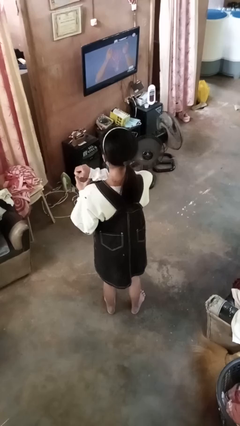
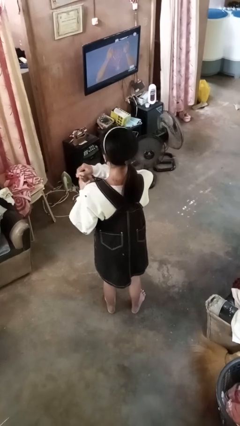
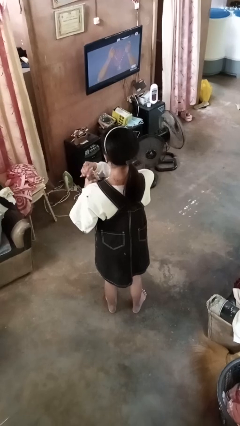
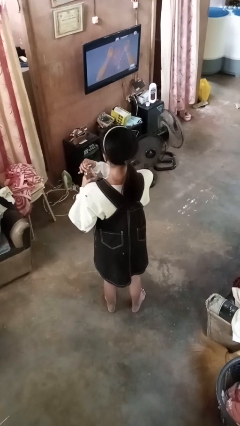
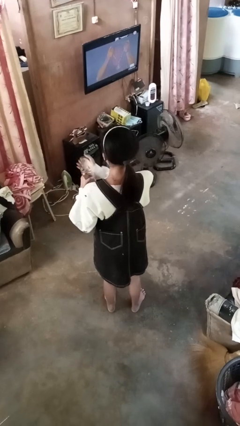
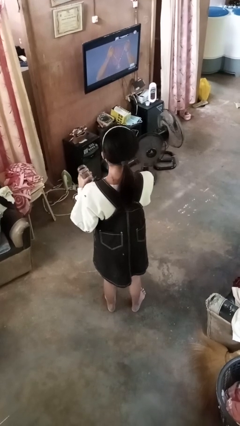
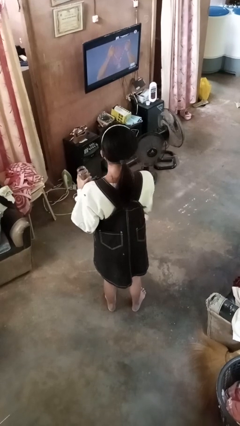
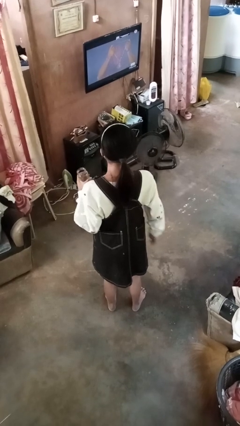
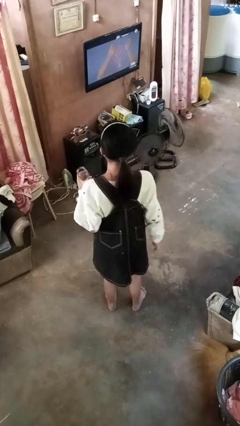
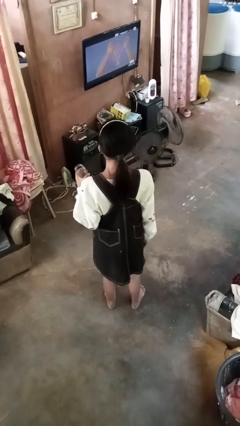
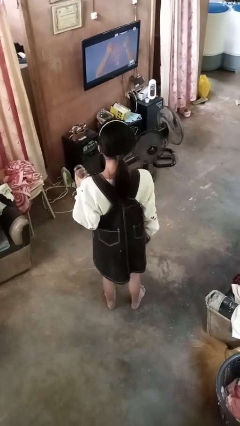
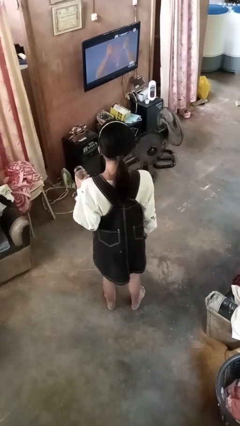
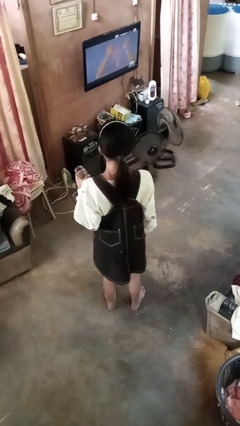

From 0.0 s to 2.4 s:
person opens jar

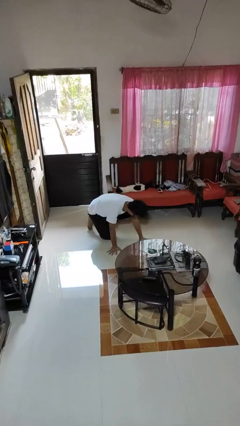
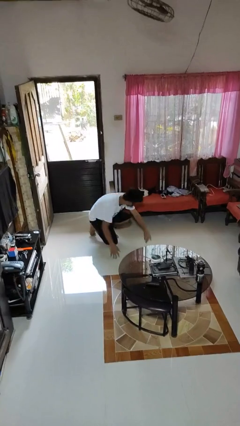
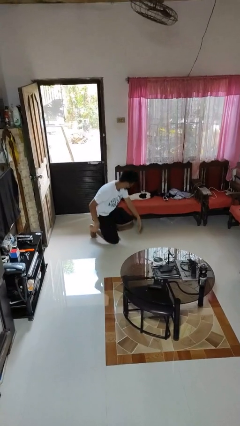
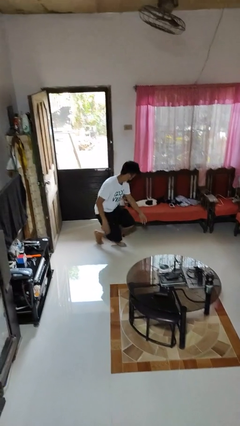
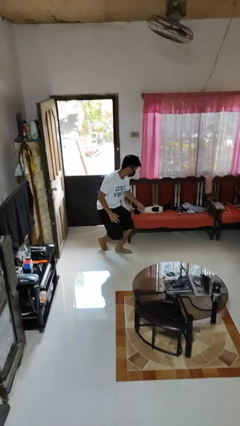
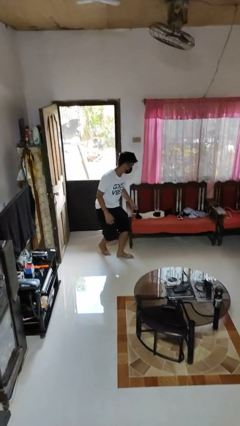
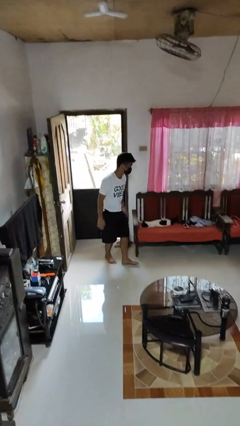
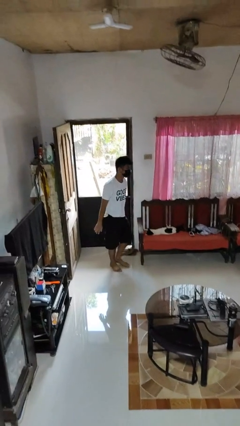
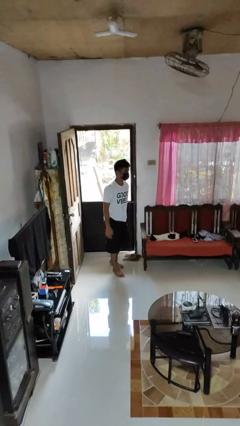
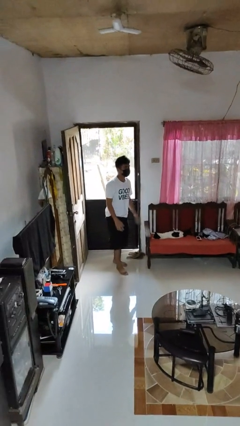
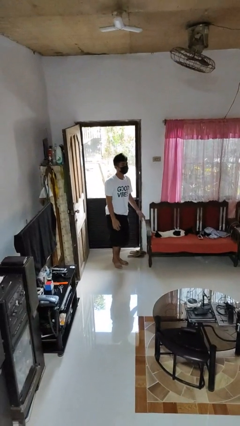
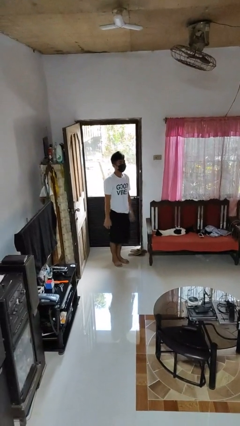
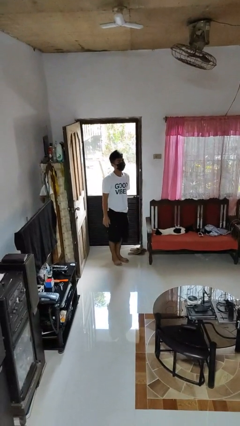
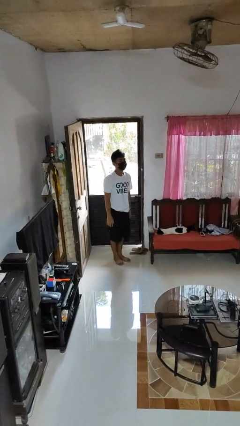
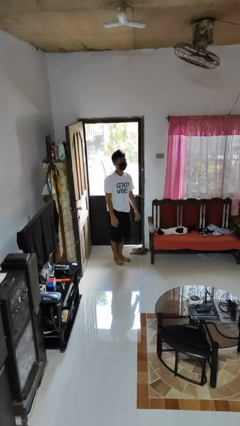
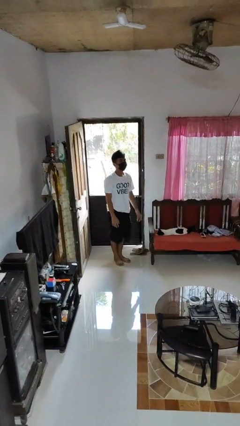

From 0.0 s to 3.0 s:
person stands up from floor

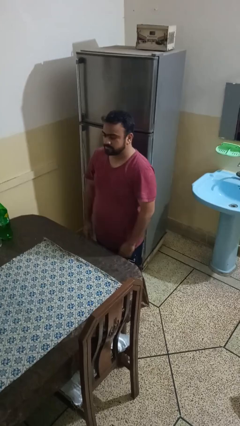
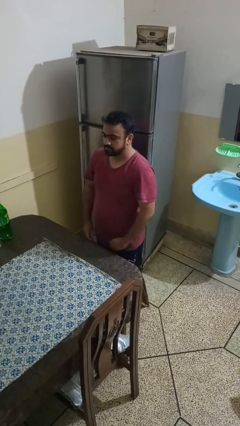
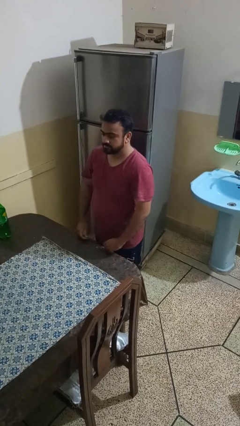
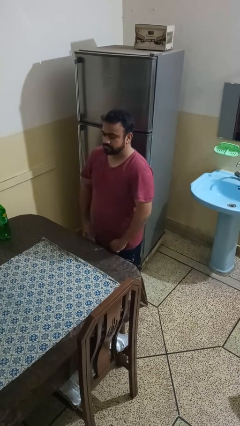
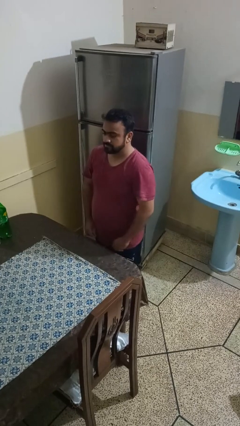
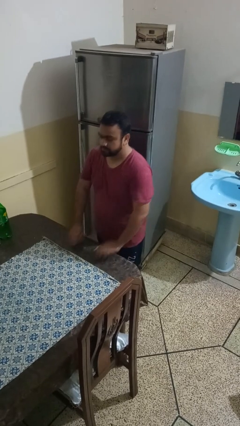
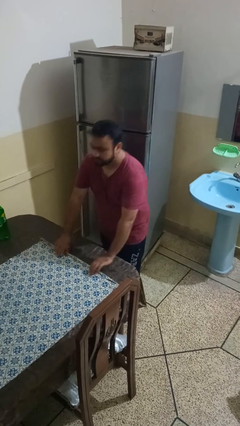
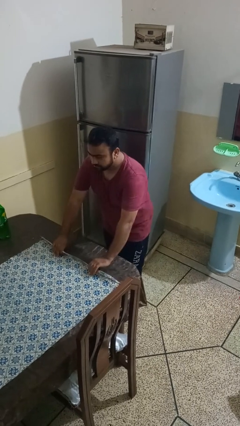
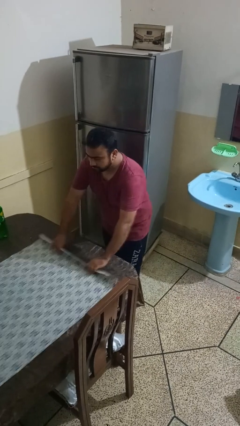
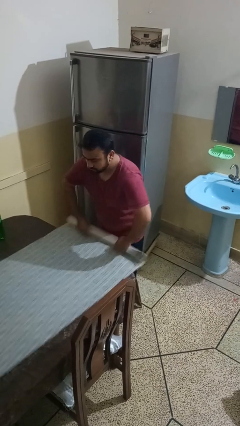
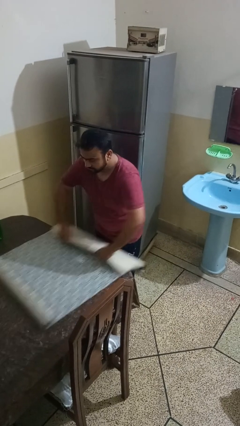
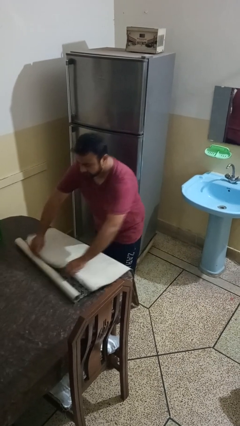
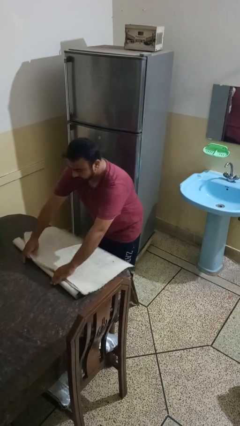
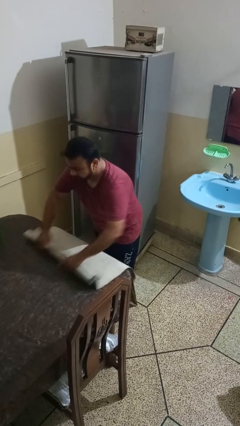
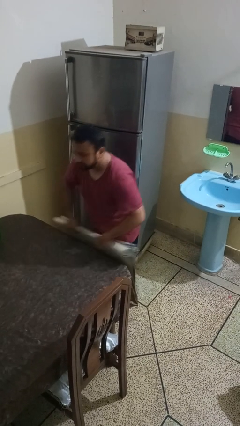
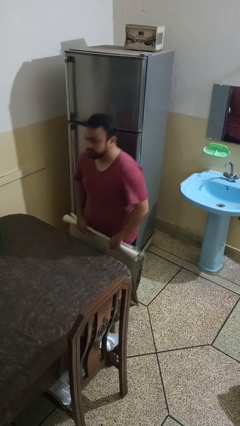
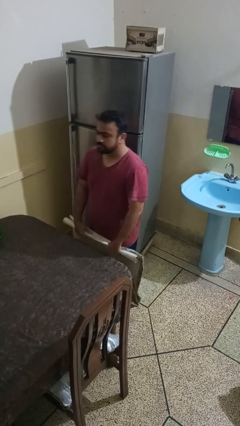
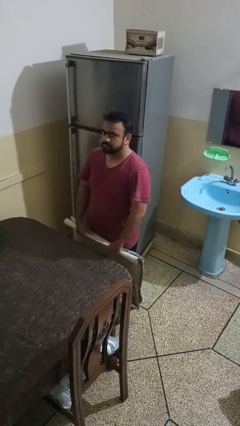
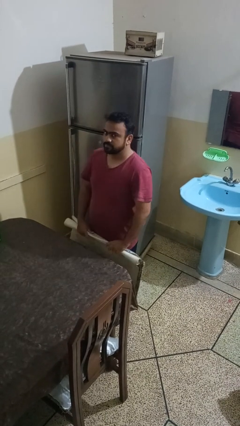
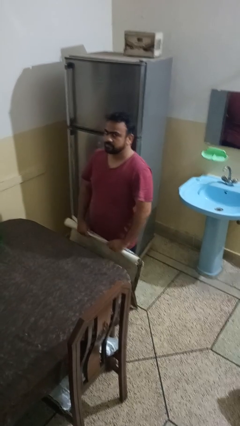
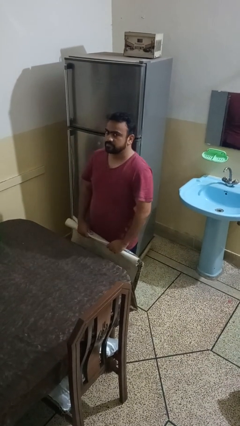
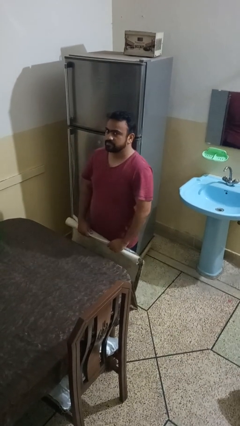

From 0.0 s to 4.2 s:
person folds tablecloth

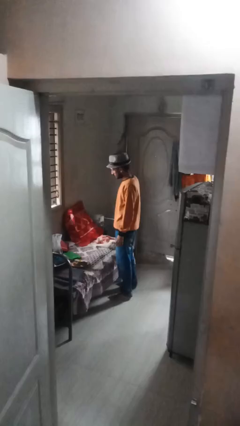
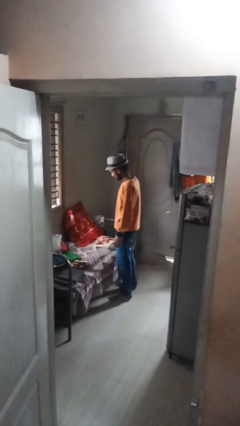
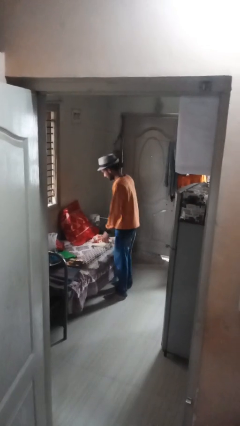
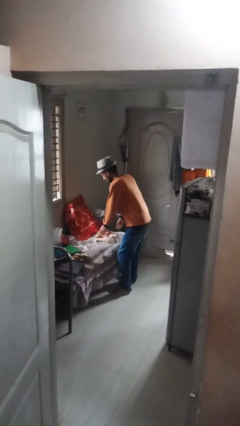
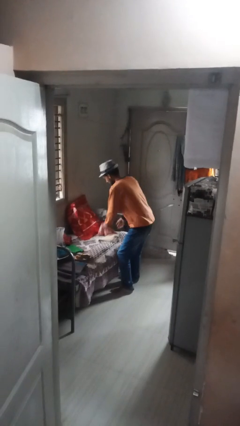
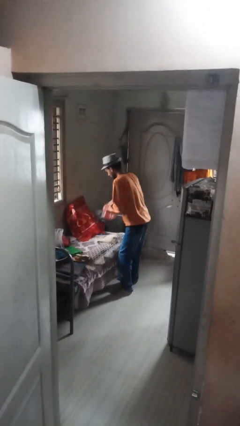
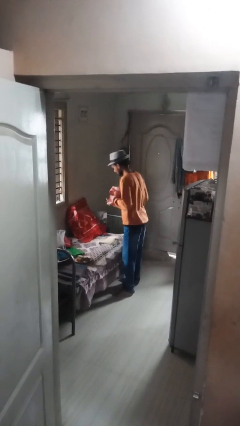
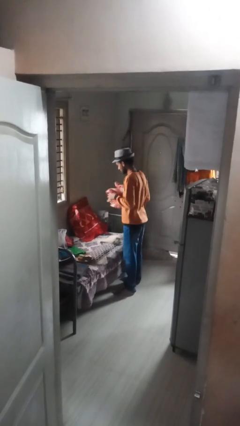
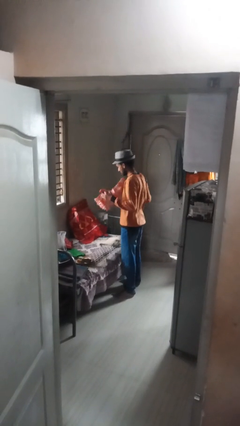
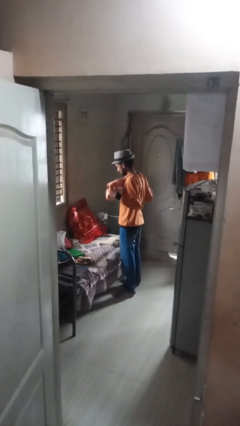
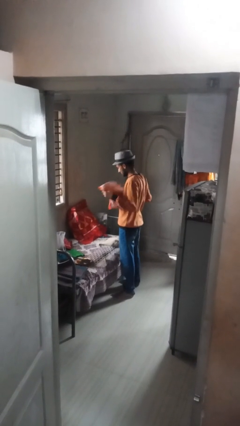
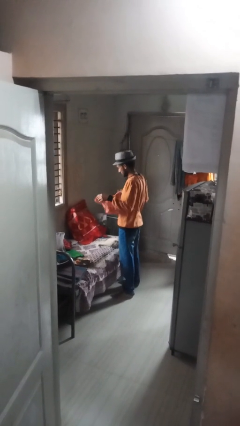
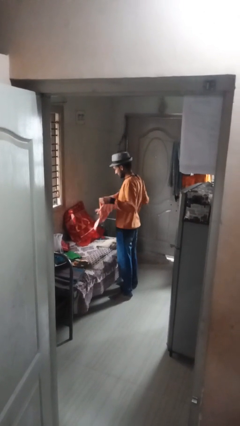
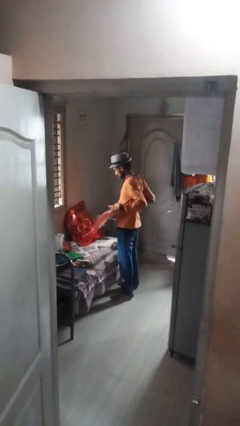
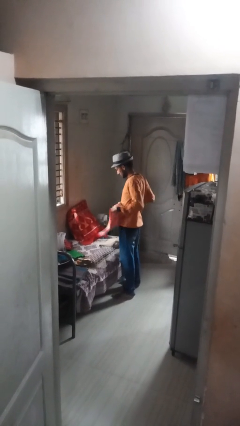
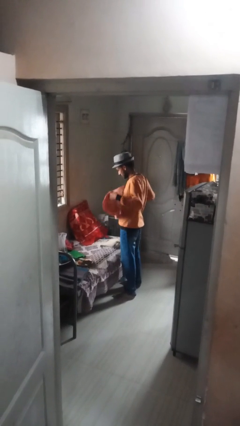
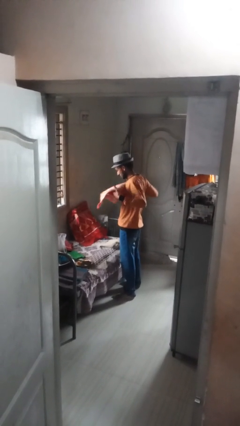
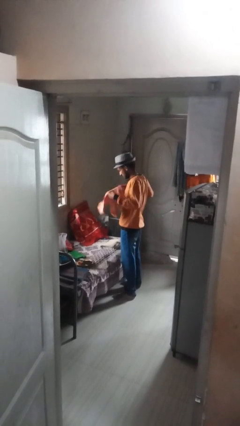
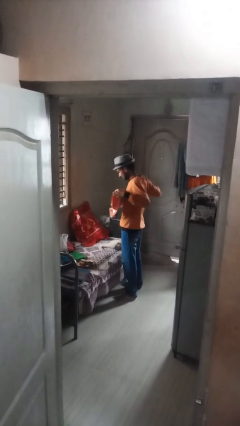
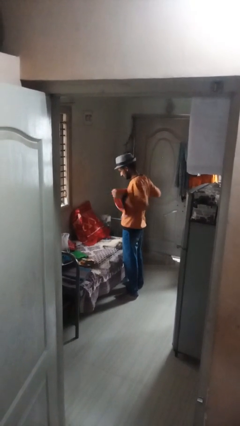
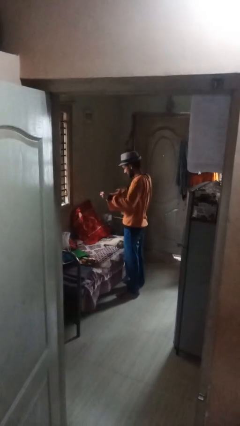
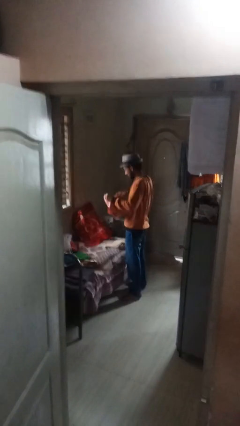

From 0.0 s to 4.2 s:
person folds towel

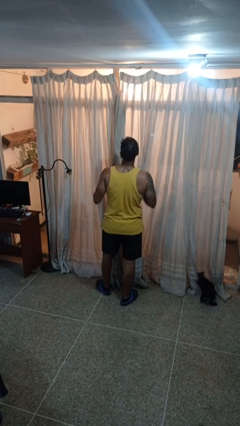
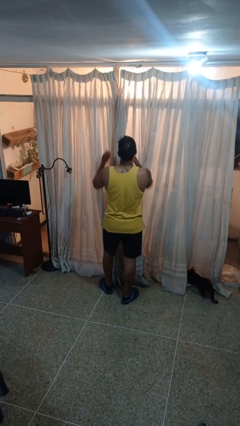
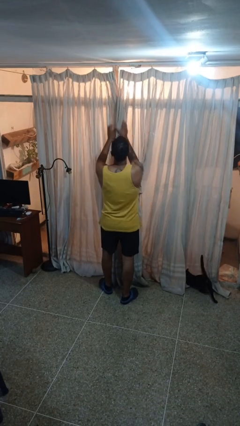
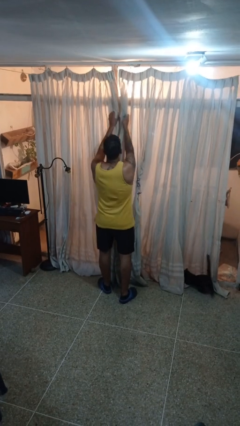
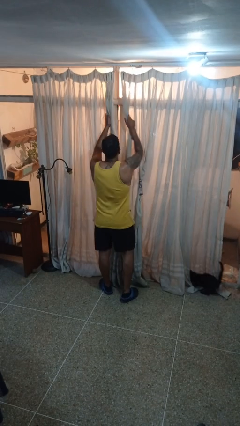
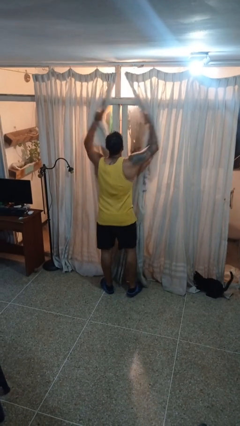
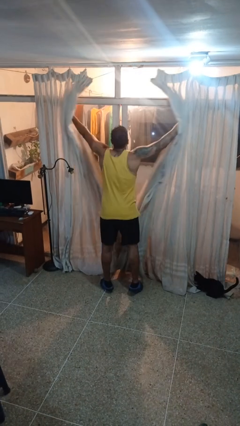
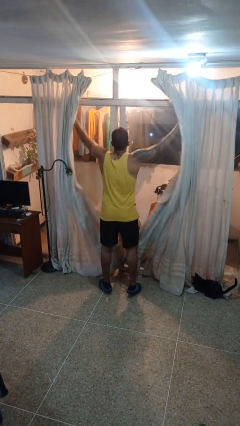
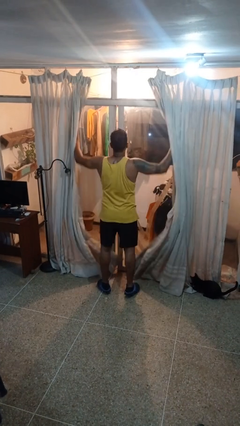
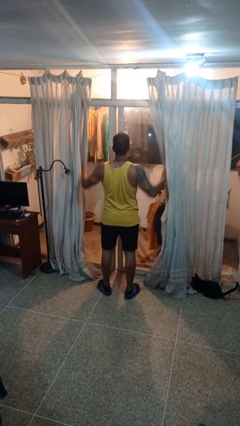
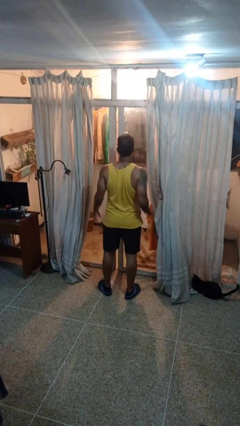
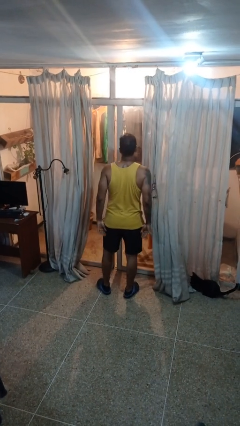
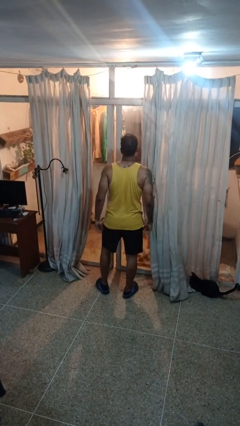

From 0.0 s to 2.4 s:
person opens curtains

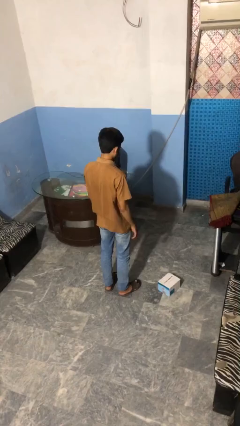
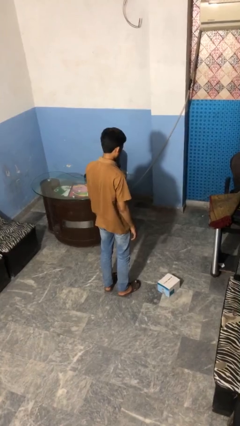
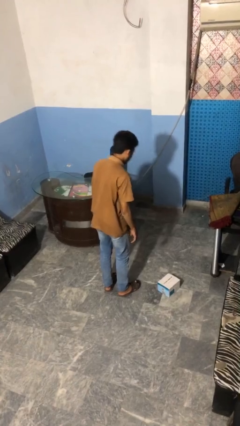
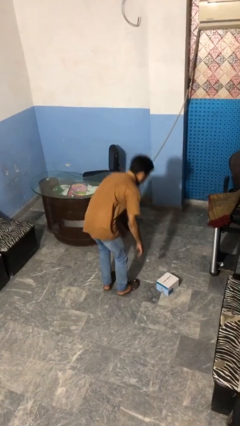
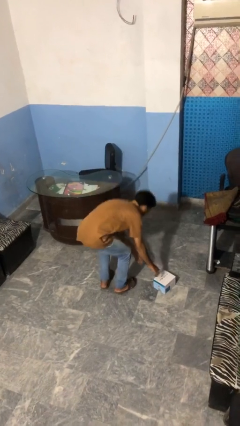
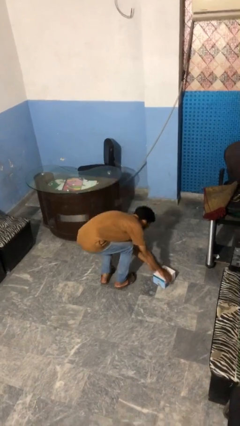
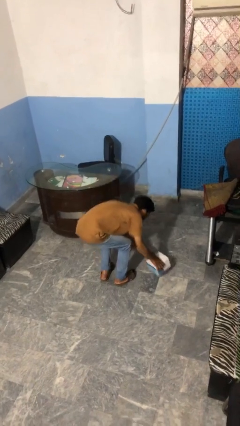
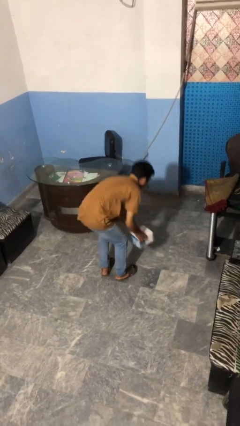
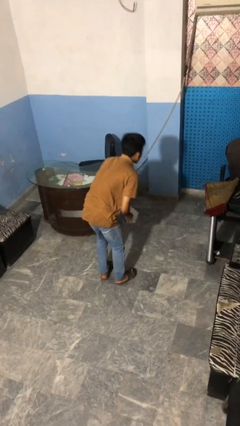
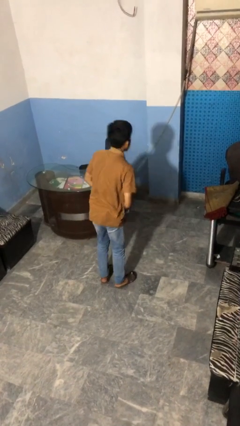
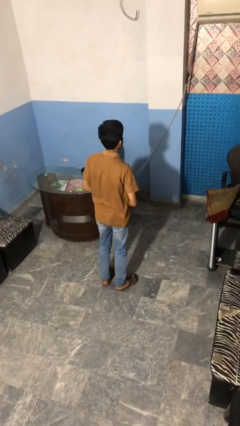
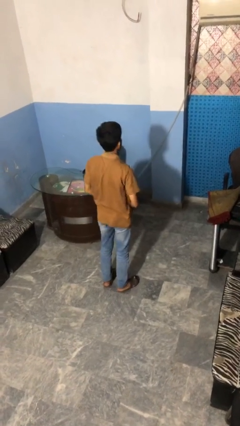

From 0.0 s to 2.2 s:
person picks up object from floor
